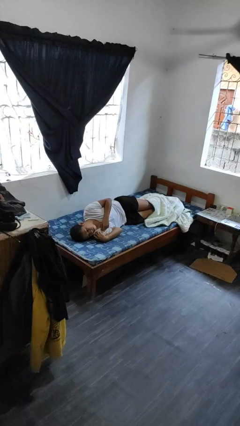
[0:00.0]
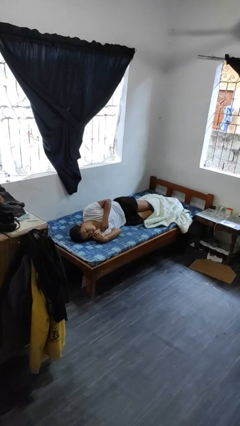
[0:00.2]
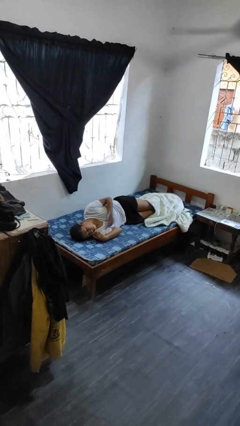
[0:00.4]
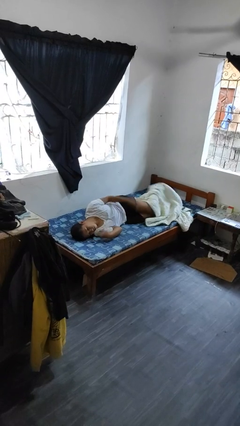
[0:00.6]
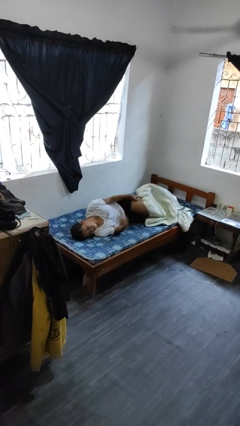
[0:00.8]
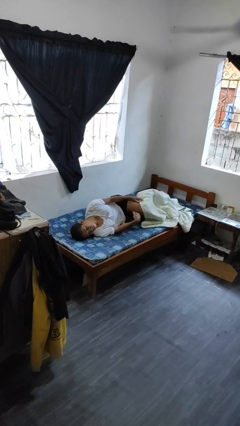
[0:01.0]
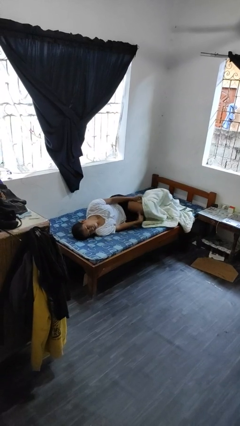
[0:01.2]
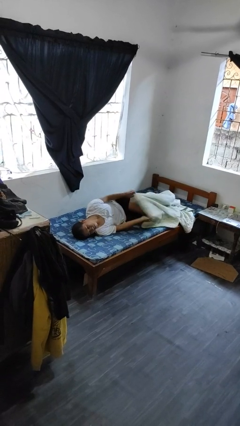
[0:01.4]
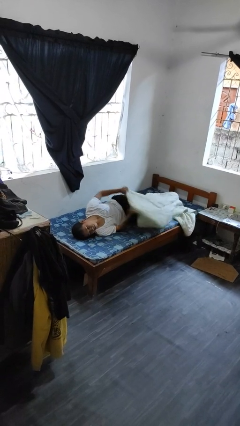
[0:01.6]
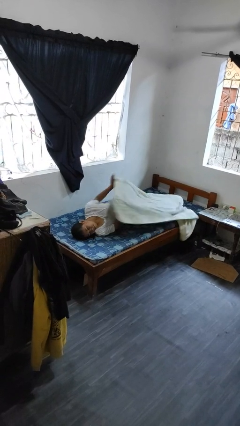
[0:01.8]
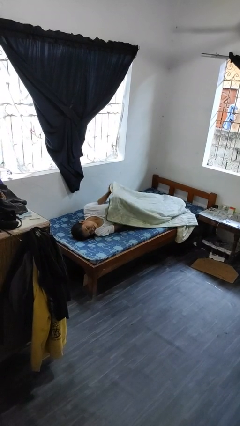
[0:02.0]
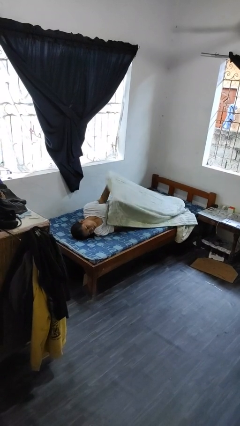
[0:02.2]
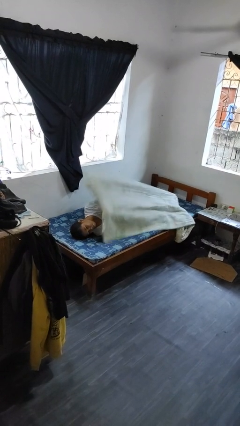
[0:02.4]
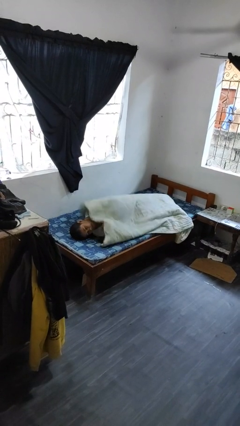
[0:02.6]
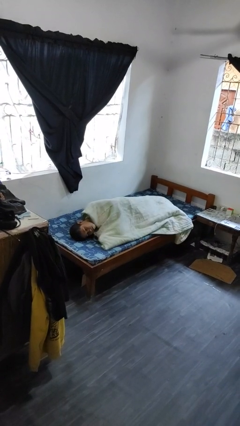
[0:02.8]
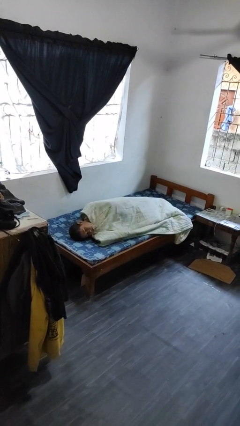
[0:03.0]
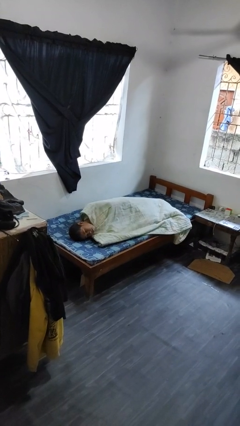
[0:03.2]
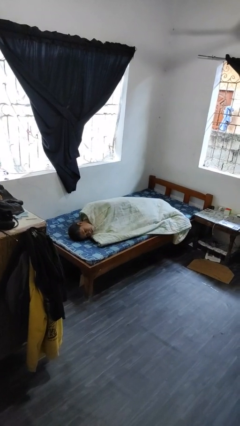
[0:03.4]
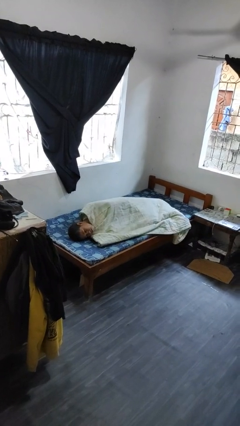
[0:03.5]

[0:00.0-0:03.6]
person covers with bedsheets

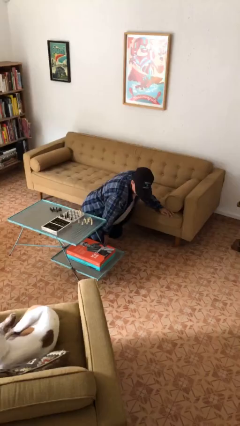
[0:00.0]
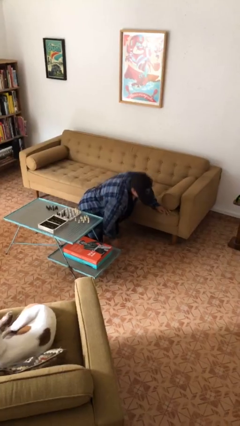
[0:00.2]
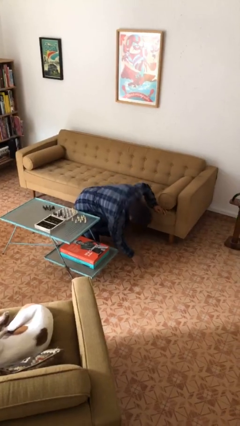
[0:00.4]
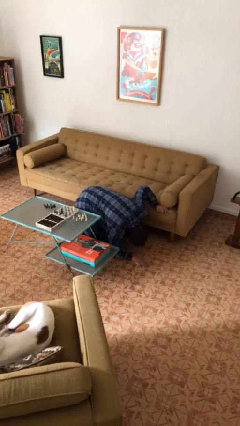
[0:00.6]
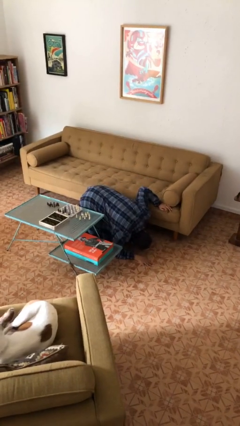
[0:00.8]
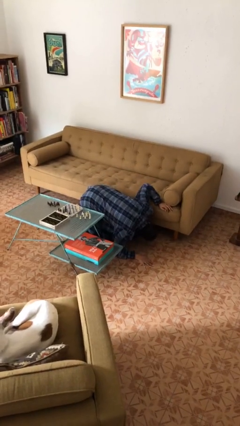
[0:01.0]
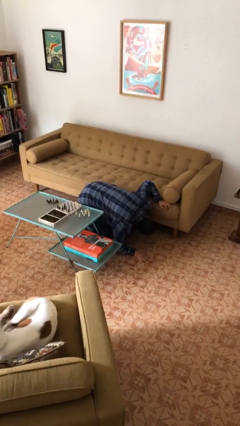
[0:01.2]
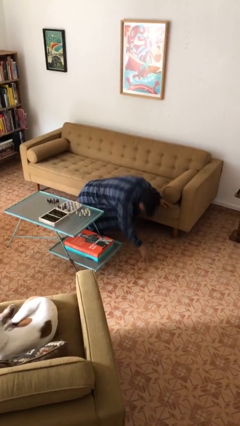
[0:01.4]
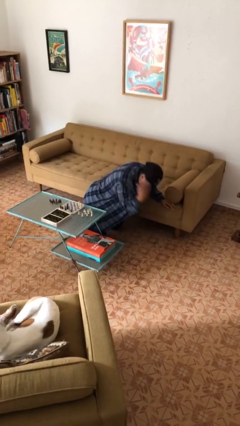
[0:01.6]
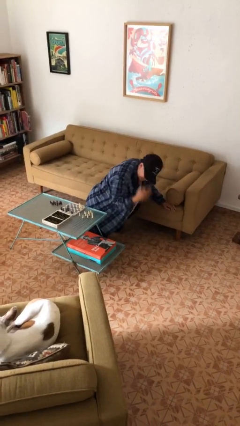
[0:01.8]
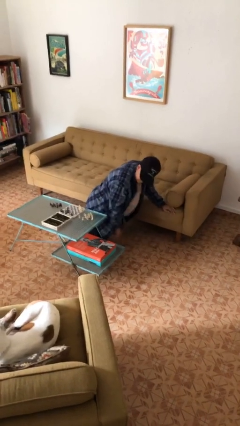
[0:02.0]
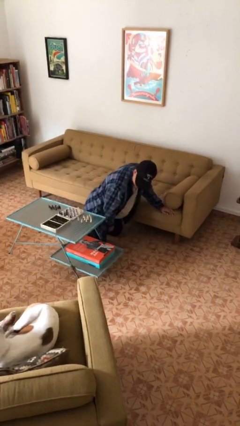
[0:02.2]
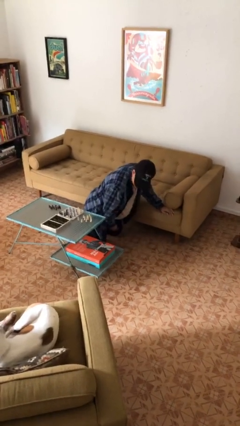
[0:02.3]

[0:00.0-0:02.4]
person searches under couch

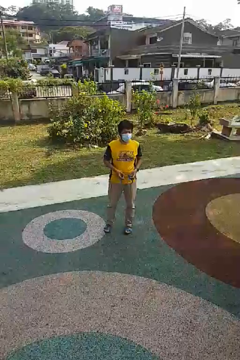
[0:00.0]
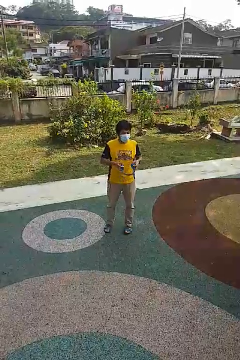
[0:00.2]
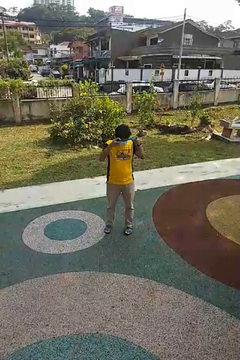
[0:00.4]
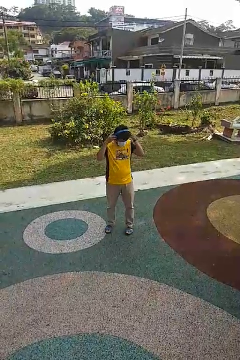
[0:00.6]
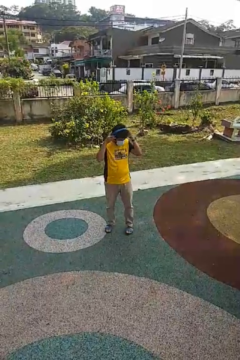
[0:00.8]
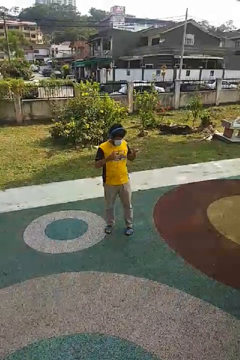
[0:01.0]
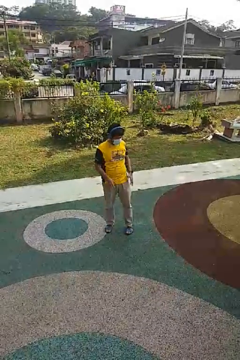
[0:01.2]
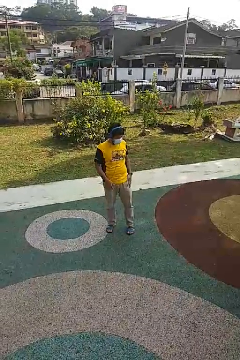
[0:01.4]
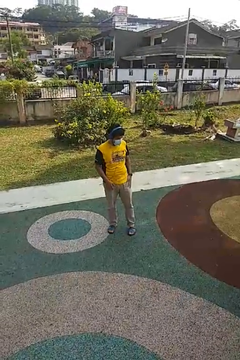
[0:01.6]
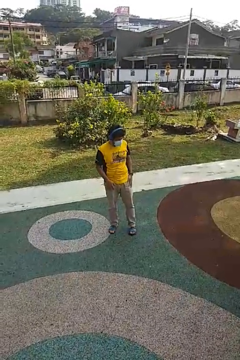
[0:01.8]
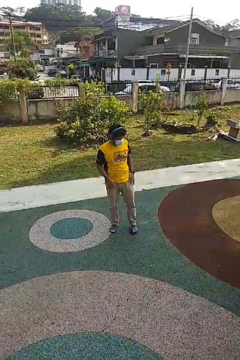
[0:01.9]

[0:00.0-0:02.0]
person puts on headphones

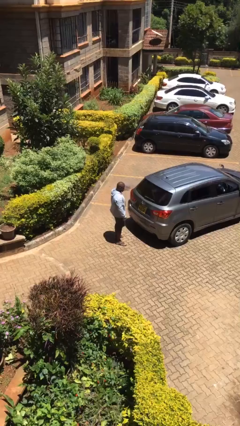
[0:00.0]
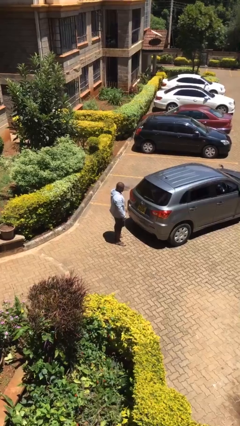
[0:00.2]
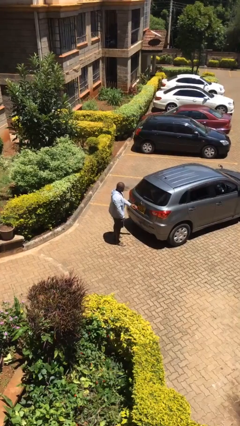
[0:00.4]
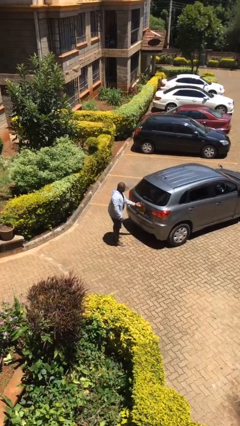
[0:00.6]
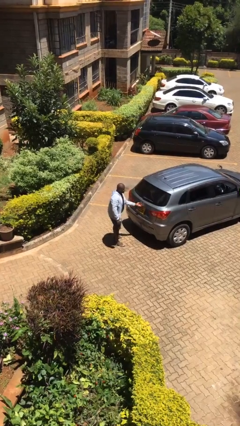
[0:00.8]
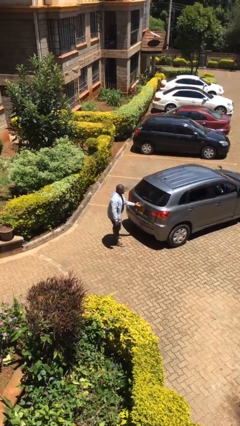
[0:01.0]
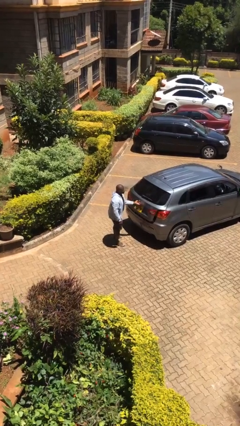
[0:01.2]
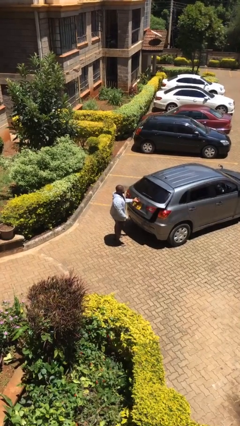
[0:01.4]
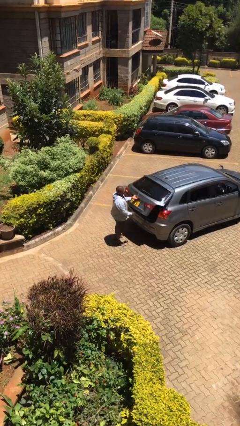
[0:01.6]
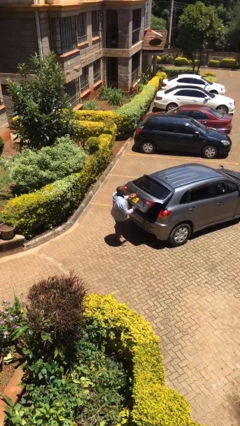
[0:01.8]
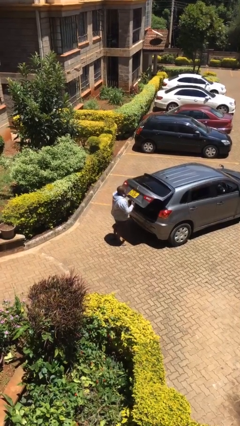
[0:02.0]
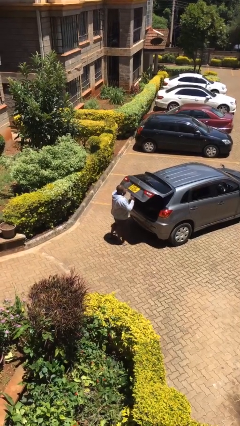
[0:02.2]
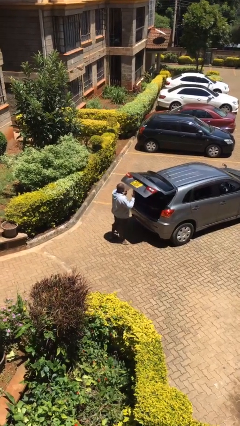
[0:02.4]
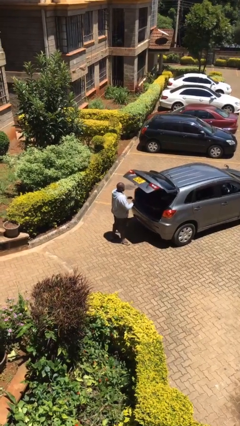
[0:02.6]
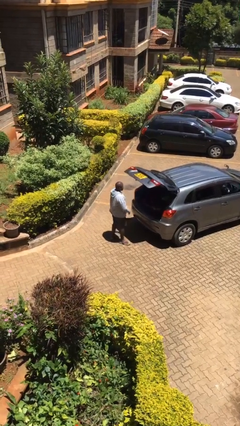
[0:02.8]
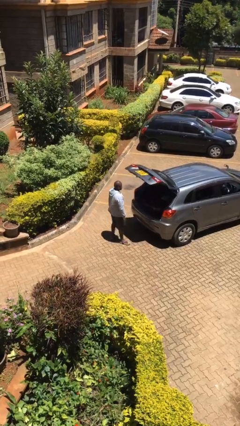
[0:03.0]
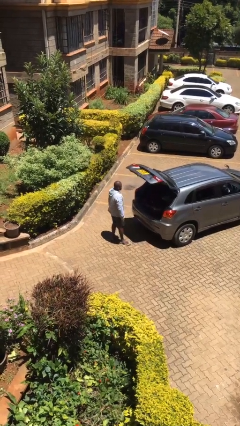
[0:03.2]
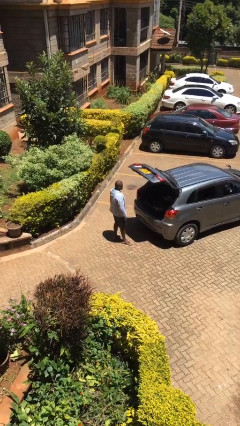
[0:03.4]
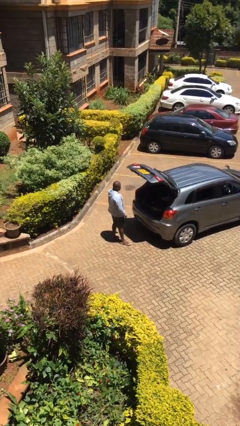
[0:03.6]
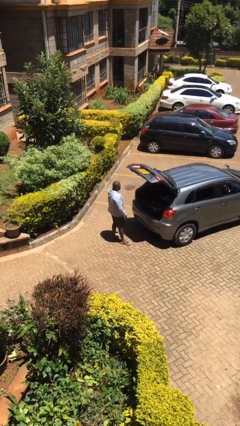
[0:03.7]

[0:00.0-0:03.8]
person opens car trunk

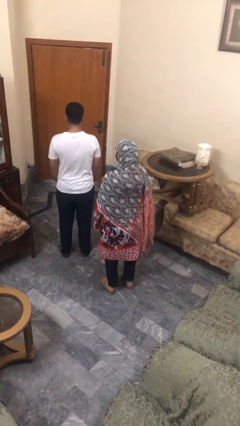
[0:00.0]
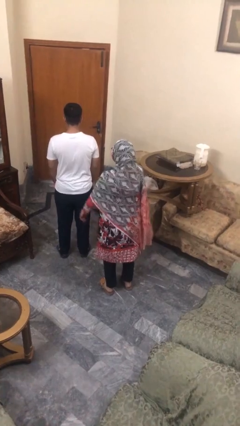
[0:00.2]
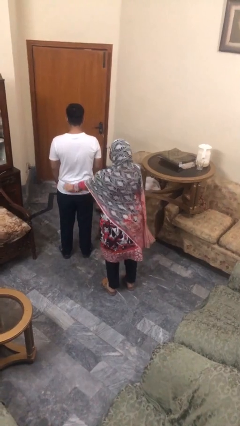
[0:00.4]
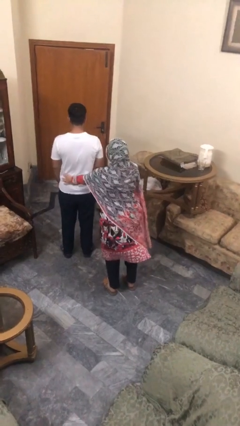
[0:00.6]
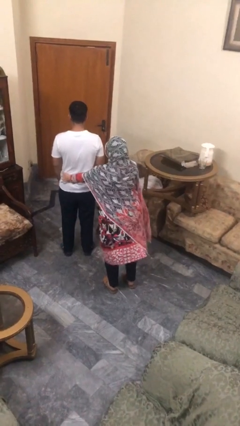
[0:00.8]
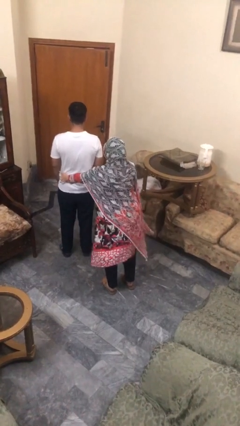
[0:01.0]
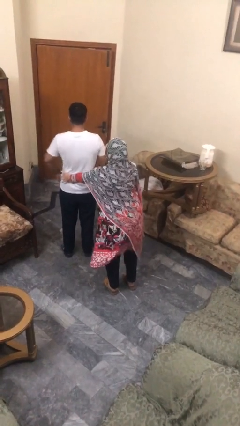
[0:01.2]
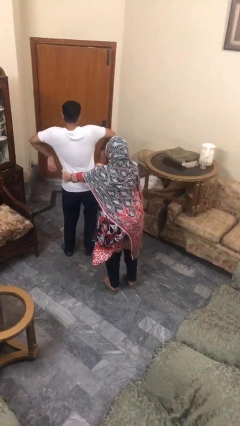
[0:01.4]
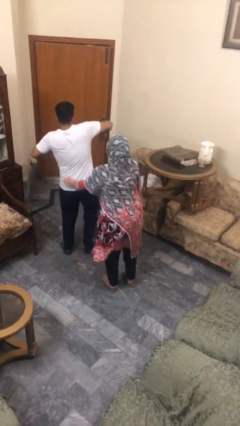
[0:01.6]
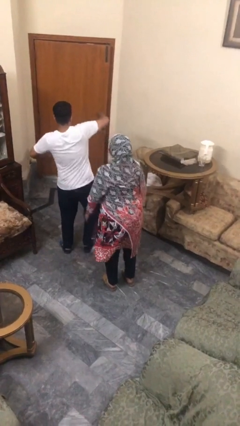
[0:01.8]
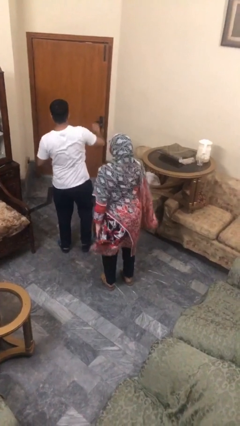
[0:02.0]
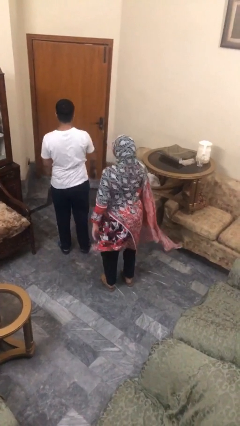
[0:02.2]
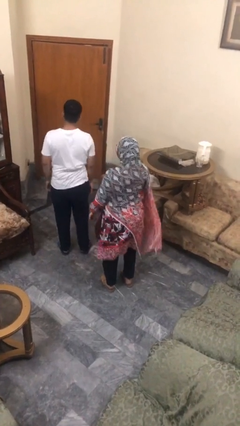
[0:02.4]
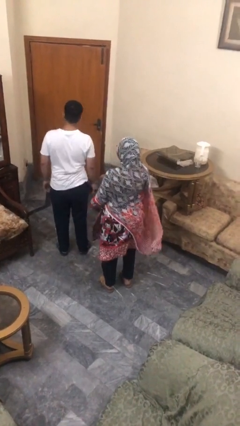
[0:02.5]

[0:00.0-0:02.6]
person tickles person

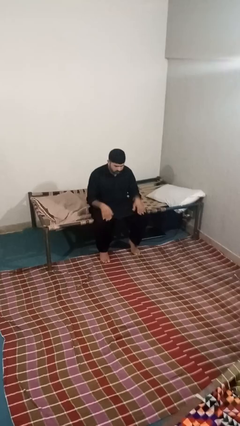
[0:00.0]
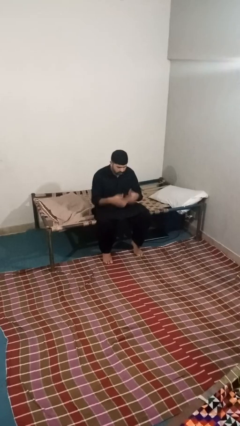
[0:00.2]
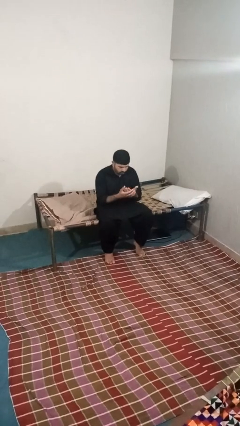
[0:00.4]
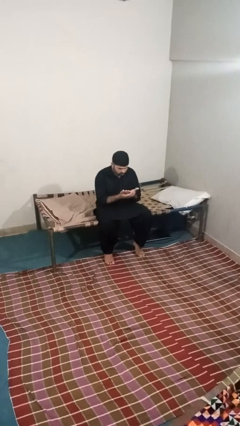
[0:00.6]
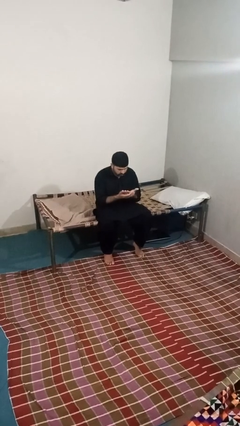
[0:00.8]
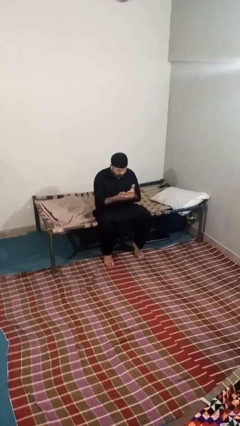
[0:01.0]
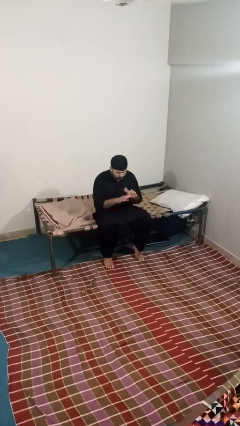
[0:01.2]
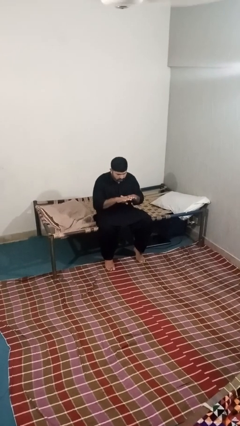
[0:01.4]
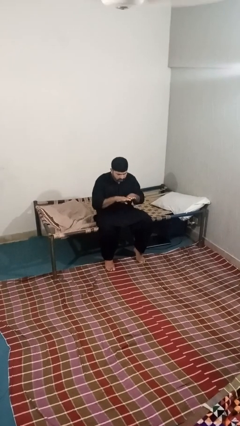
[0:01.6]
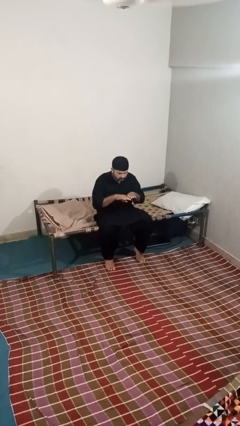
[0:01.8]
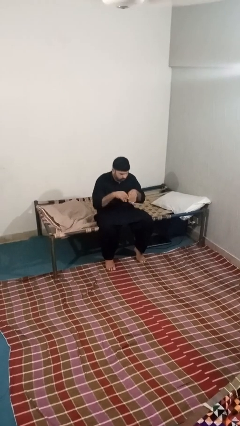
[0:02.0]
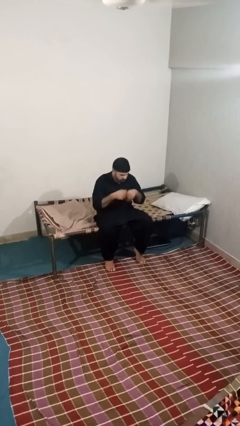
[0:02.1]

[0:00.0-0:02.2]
person looks at hands in lap

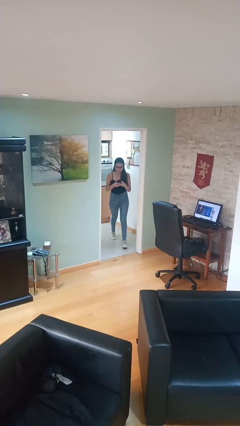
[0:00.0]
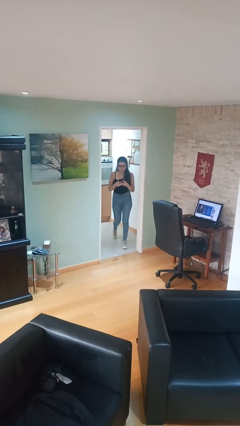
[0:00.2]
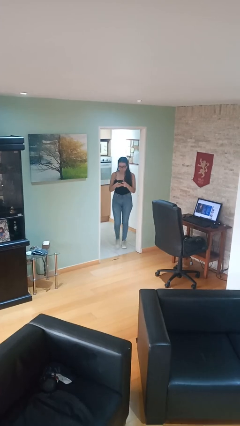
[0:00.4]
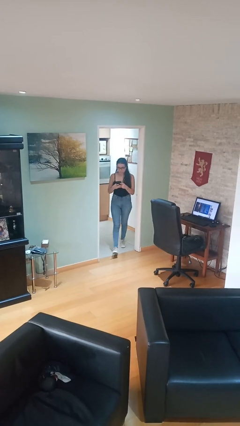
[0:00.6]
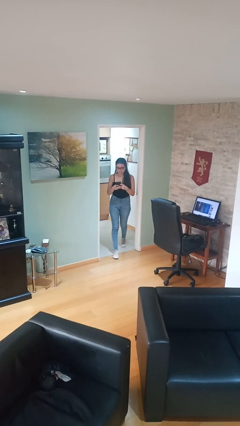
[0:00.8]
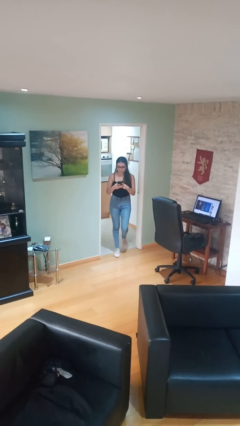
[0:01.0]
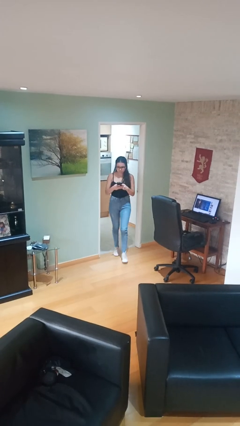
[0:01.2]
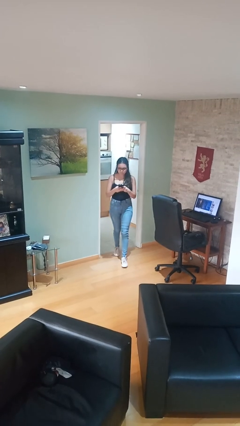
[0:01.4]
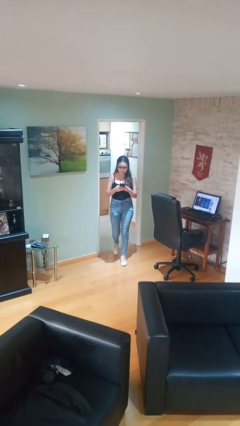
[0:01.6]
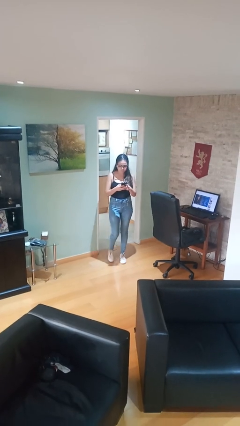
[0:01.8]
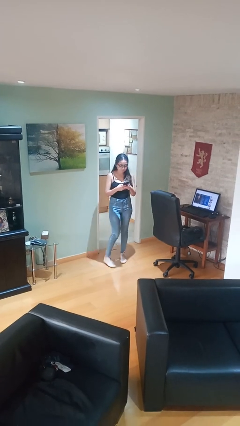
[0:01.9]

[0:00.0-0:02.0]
person enters scene through structure